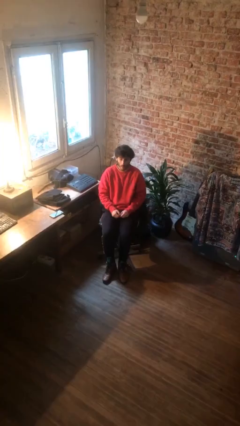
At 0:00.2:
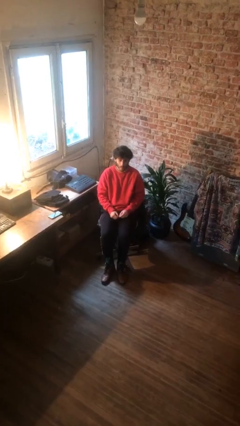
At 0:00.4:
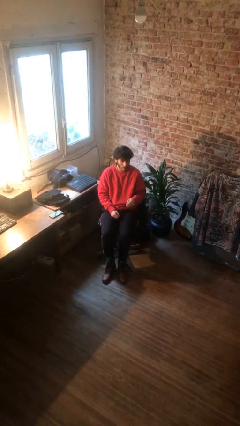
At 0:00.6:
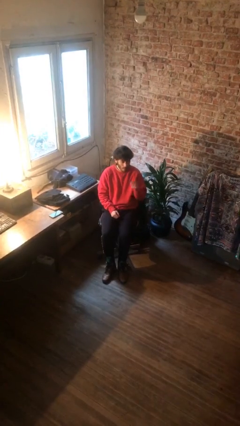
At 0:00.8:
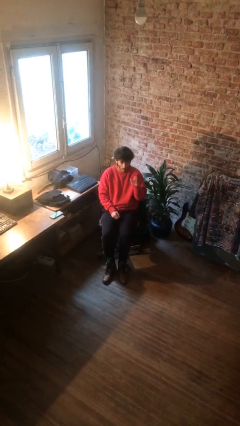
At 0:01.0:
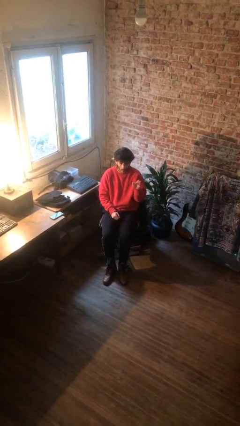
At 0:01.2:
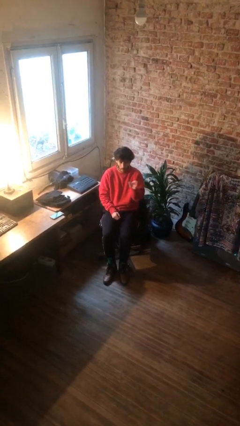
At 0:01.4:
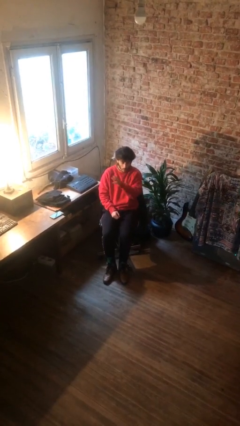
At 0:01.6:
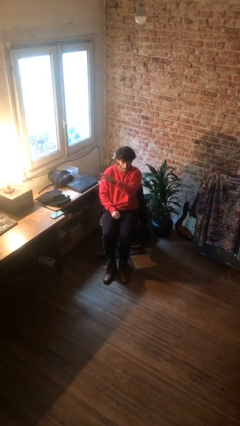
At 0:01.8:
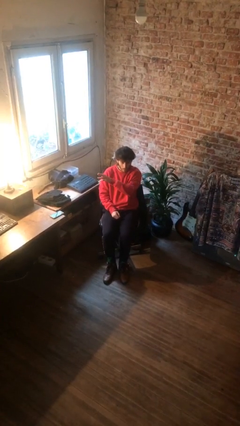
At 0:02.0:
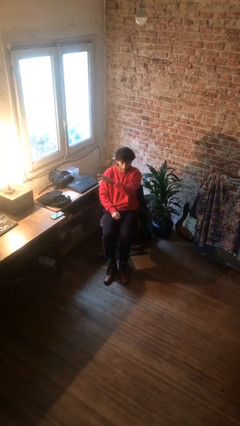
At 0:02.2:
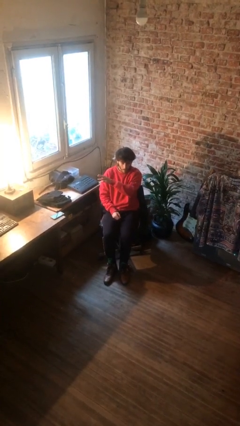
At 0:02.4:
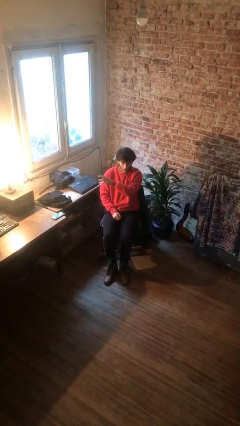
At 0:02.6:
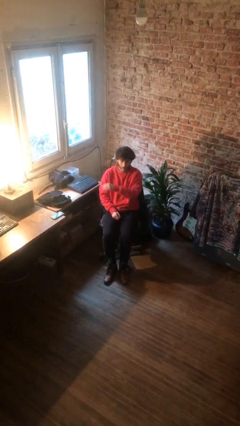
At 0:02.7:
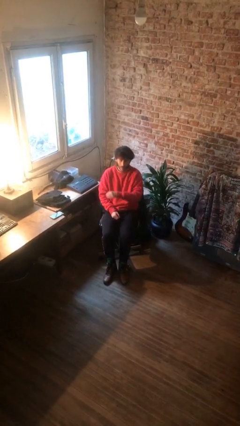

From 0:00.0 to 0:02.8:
person gestures swipe right

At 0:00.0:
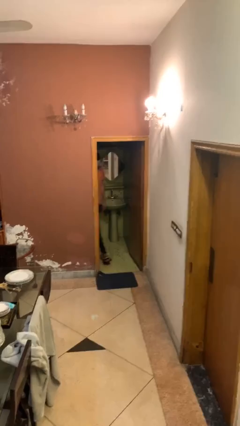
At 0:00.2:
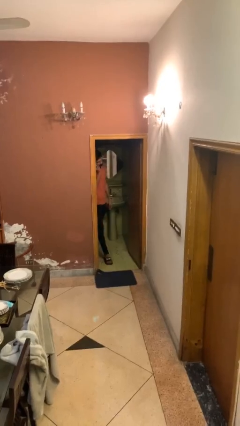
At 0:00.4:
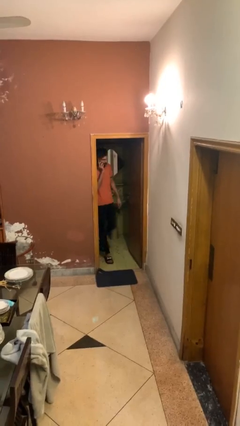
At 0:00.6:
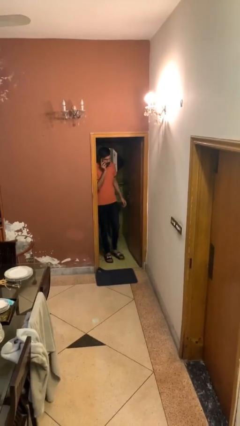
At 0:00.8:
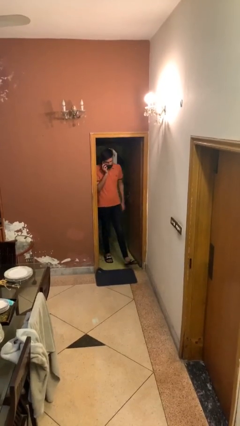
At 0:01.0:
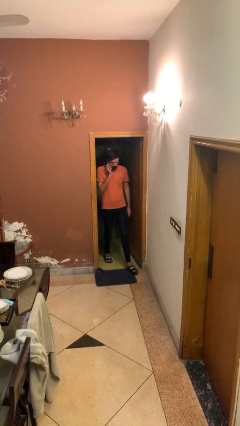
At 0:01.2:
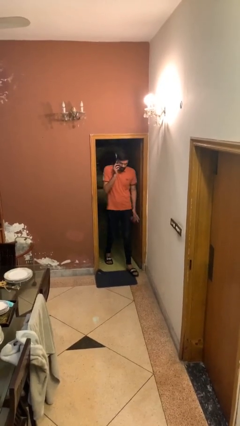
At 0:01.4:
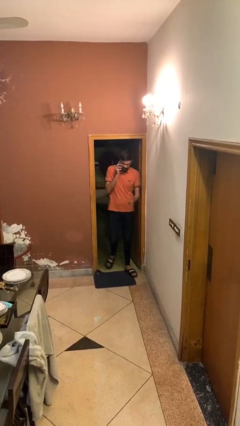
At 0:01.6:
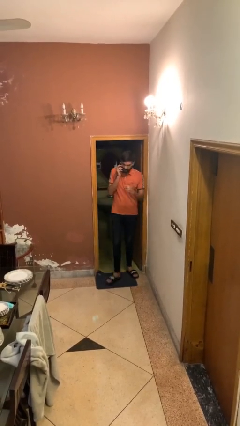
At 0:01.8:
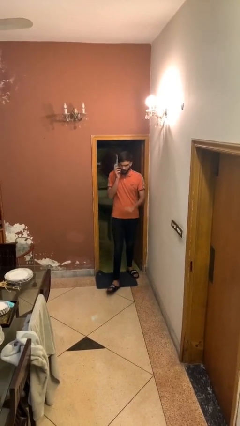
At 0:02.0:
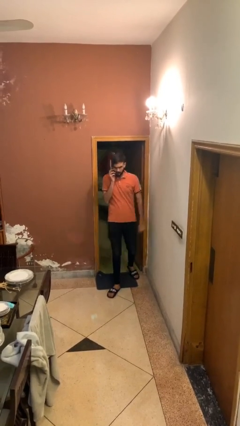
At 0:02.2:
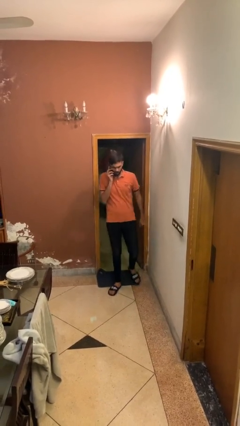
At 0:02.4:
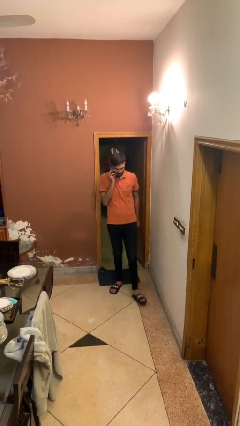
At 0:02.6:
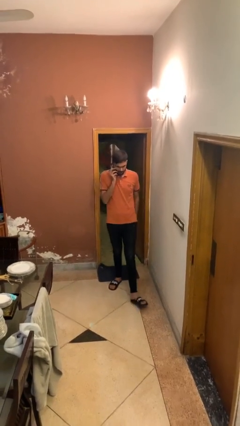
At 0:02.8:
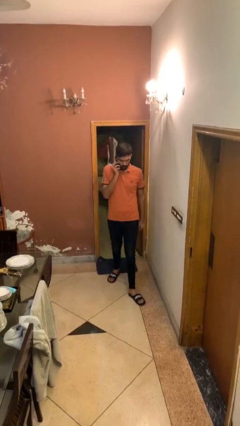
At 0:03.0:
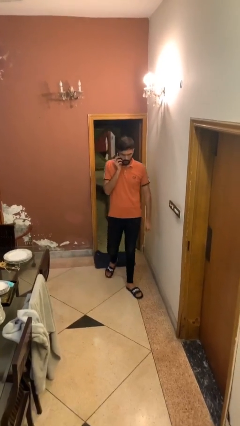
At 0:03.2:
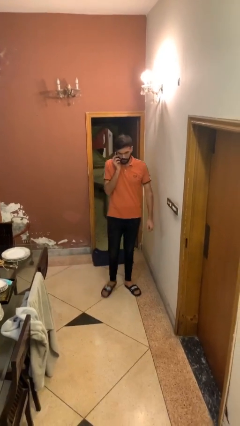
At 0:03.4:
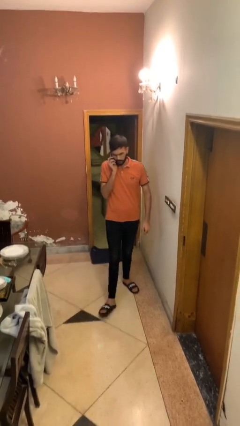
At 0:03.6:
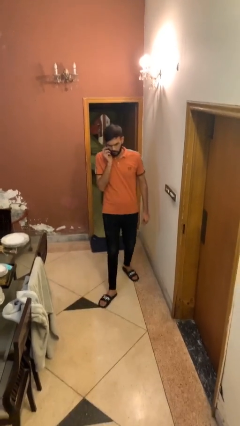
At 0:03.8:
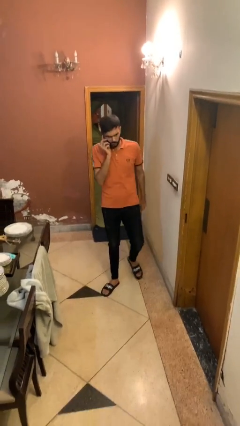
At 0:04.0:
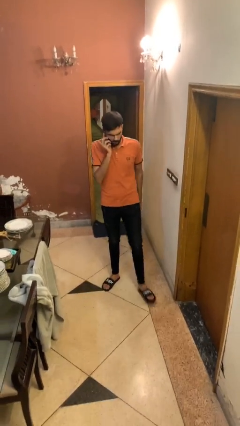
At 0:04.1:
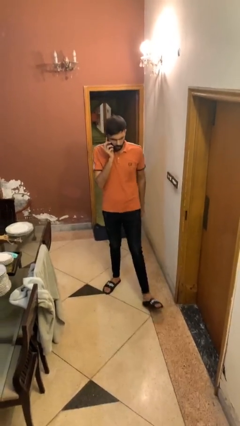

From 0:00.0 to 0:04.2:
person enters scene through structure

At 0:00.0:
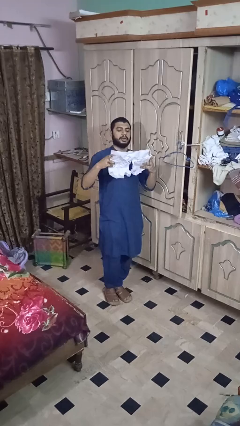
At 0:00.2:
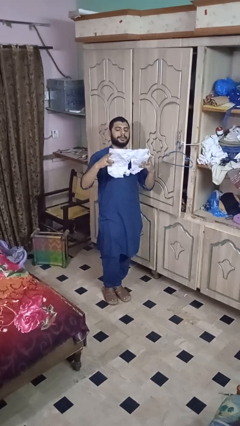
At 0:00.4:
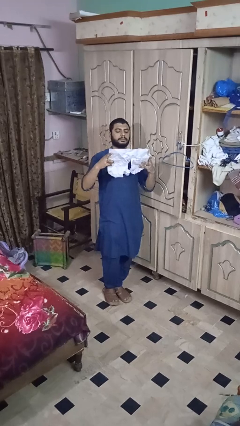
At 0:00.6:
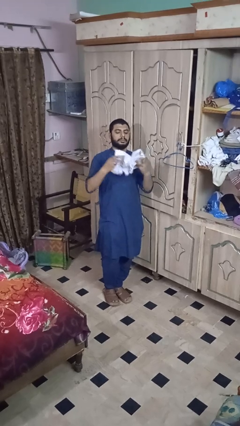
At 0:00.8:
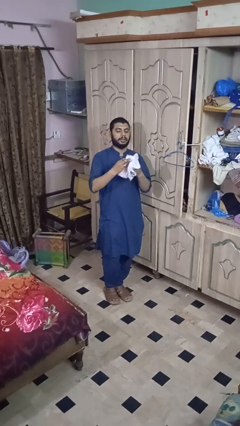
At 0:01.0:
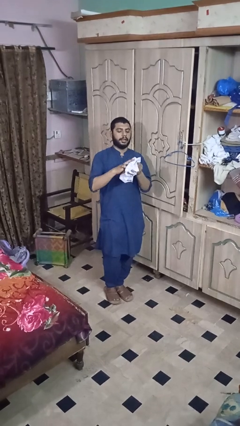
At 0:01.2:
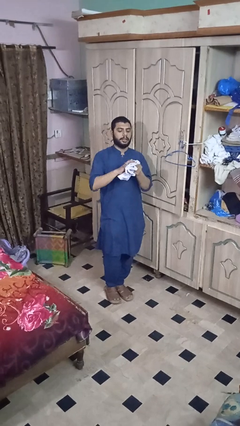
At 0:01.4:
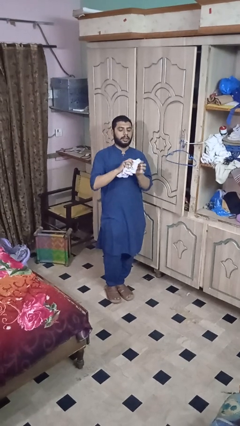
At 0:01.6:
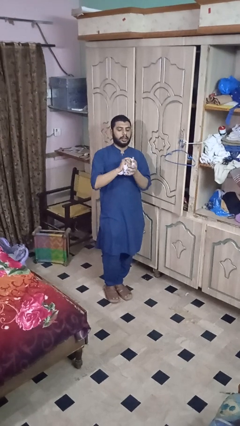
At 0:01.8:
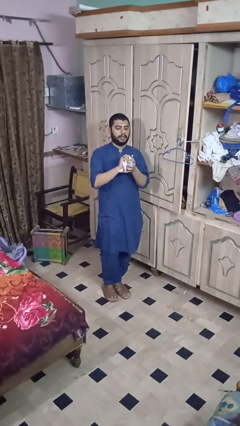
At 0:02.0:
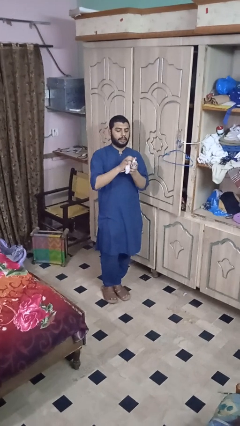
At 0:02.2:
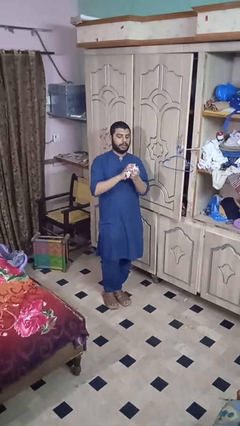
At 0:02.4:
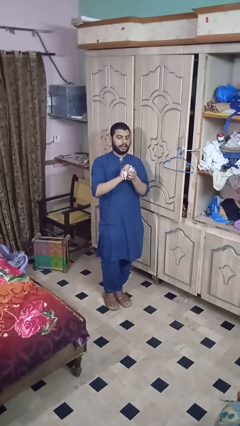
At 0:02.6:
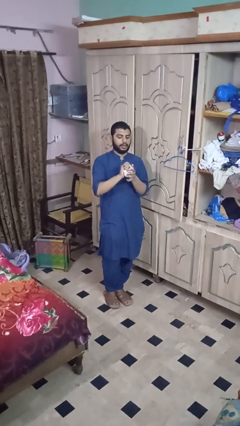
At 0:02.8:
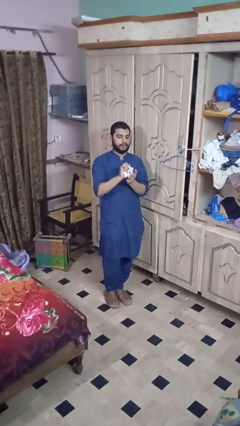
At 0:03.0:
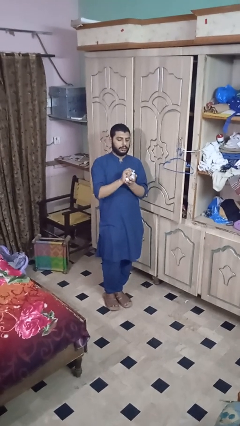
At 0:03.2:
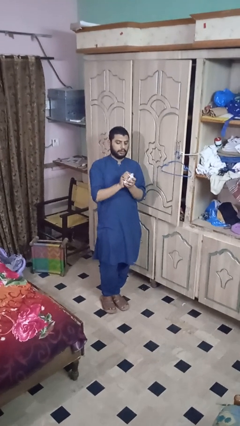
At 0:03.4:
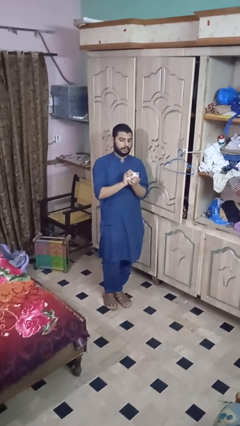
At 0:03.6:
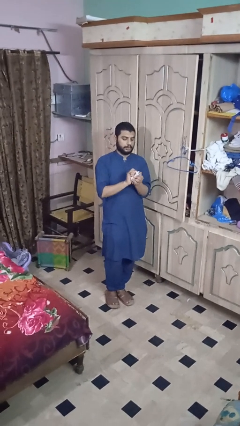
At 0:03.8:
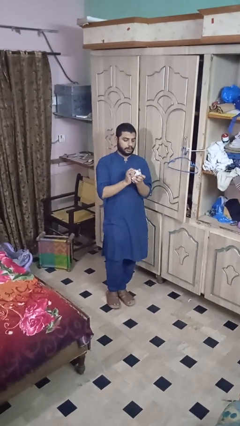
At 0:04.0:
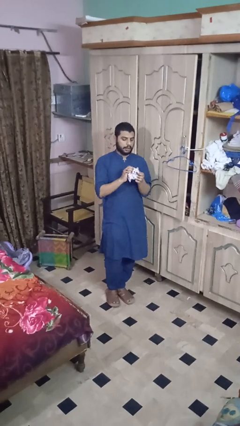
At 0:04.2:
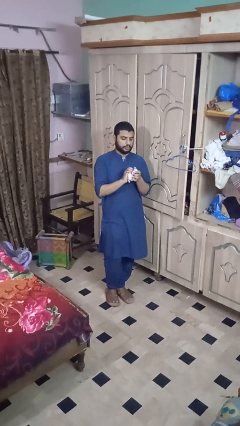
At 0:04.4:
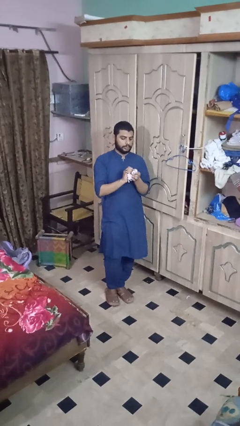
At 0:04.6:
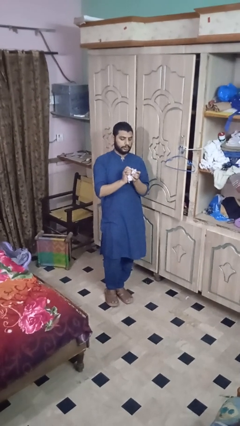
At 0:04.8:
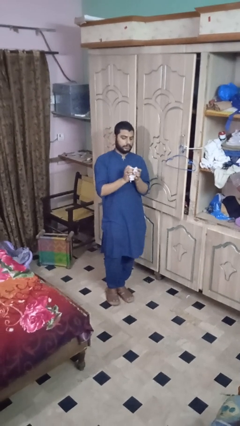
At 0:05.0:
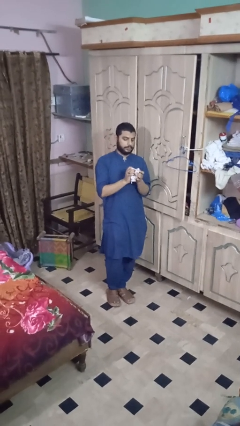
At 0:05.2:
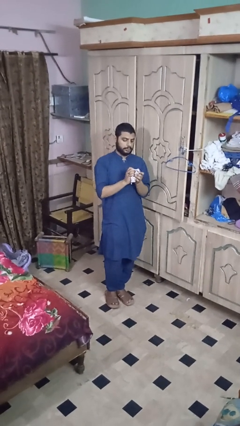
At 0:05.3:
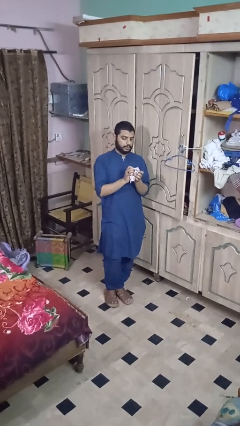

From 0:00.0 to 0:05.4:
person crumples paper

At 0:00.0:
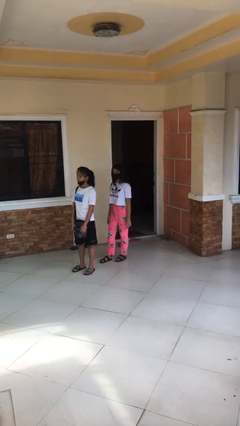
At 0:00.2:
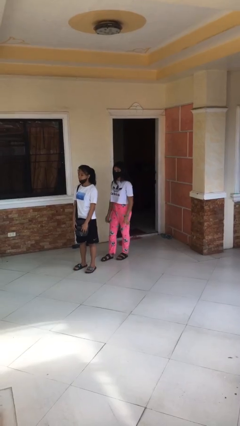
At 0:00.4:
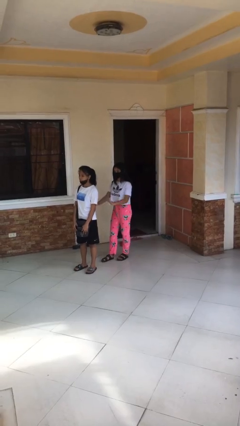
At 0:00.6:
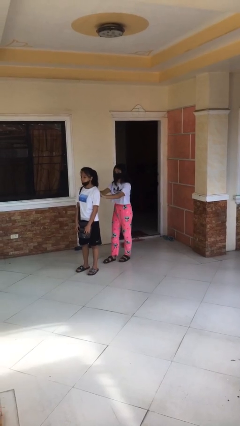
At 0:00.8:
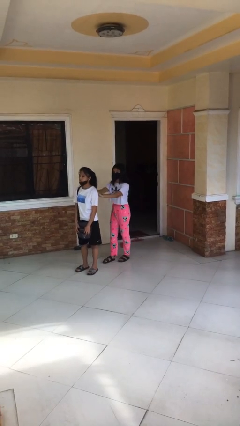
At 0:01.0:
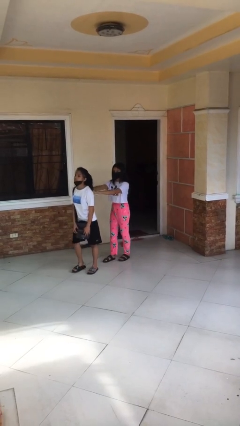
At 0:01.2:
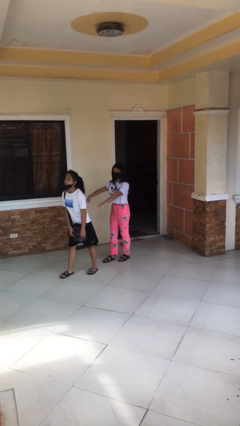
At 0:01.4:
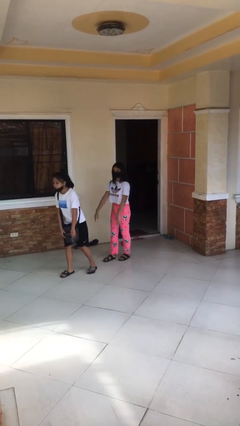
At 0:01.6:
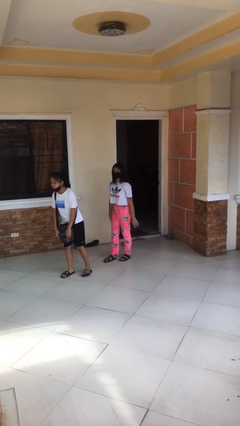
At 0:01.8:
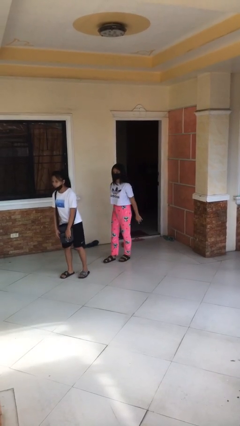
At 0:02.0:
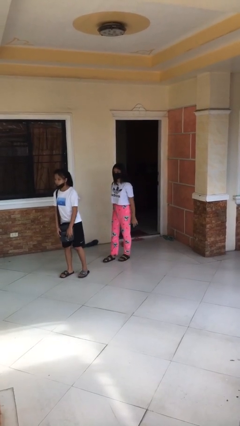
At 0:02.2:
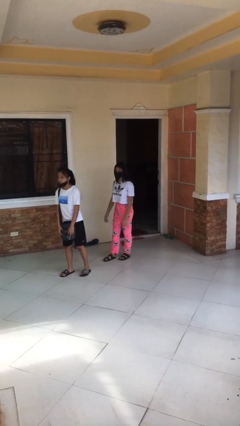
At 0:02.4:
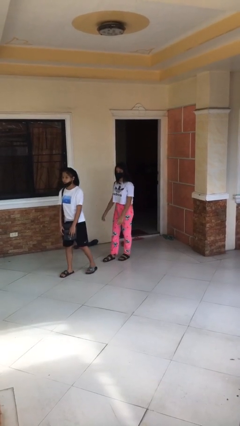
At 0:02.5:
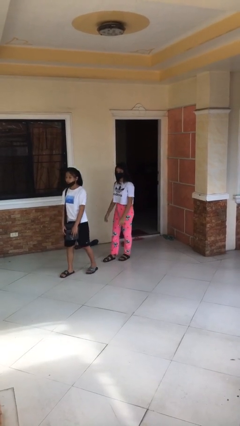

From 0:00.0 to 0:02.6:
person shoves person

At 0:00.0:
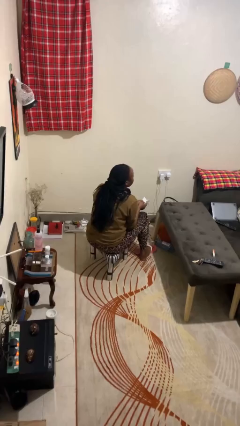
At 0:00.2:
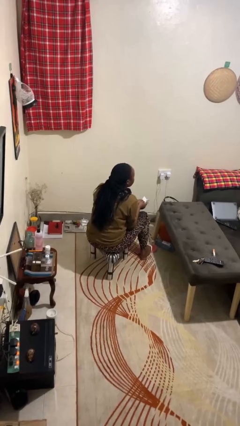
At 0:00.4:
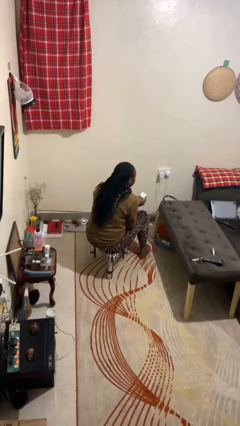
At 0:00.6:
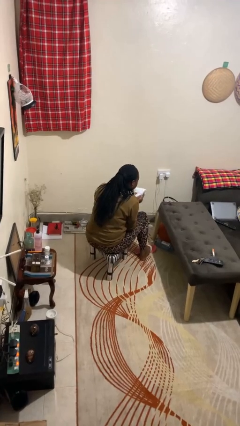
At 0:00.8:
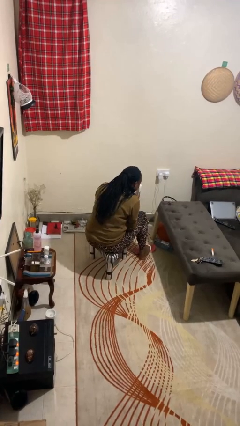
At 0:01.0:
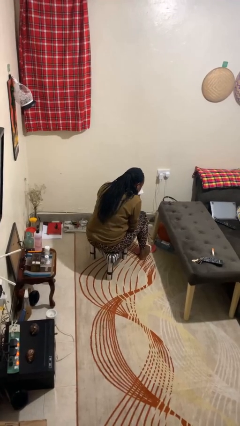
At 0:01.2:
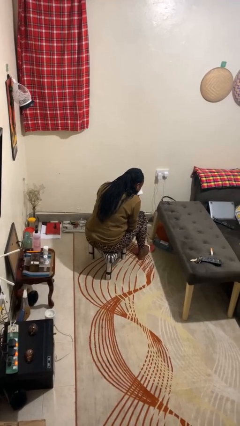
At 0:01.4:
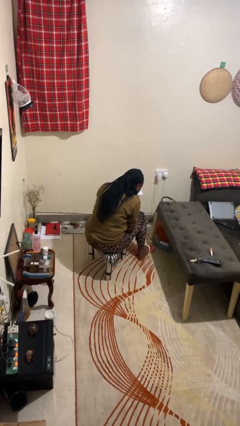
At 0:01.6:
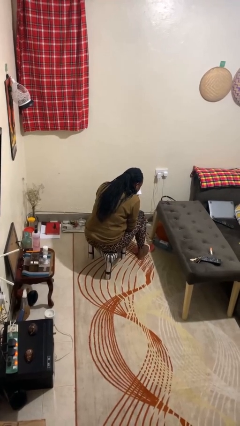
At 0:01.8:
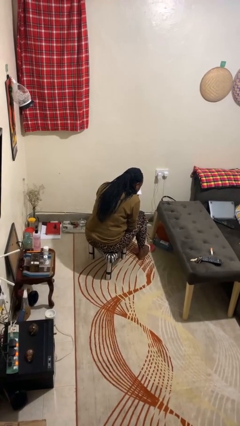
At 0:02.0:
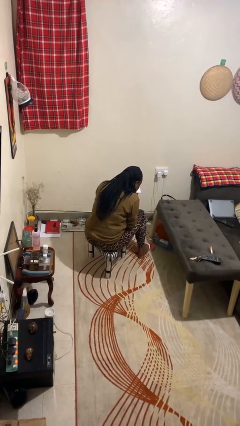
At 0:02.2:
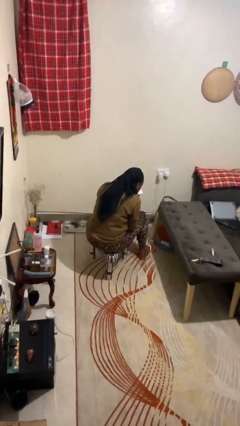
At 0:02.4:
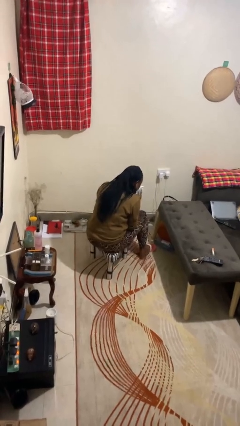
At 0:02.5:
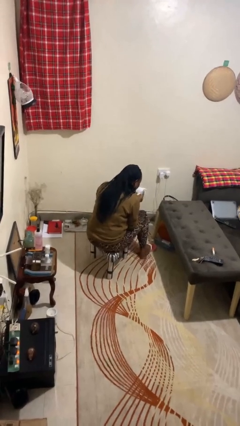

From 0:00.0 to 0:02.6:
person blows nose
